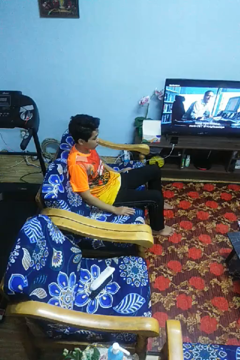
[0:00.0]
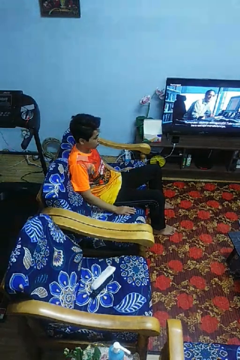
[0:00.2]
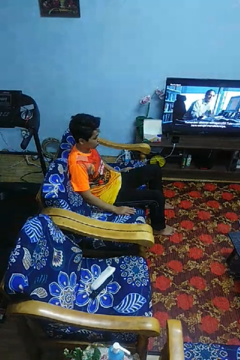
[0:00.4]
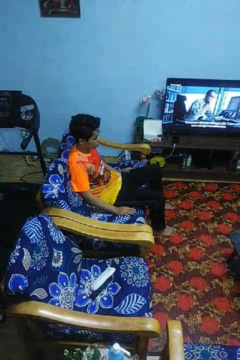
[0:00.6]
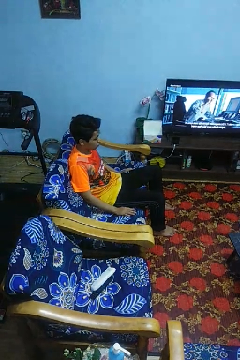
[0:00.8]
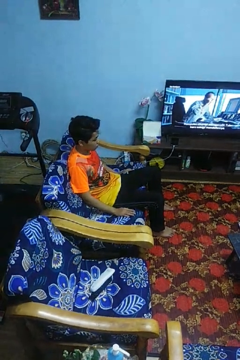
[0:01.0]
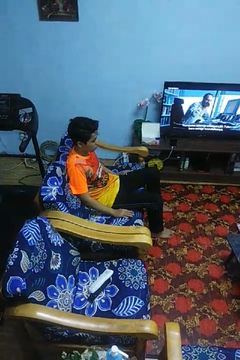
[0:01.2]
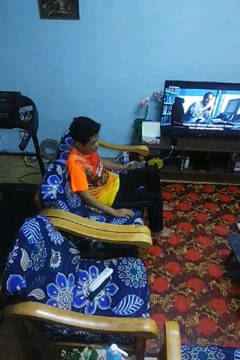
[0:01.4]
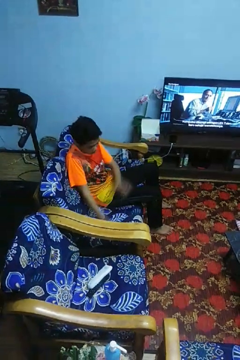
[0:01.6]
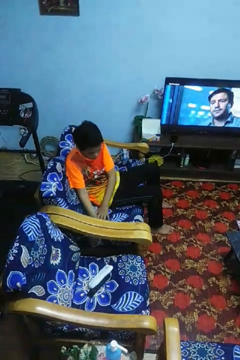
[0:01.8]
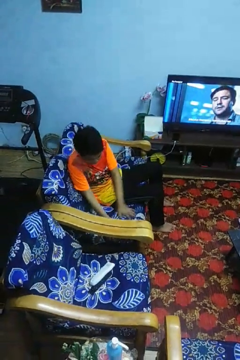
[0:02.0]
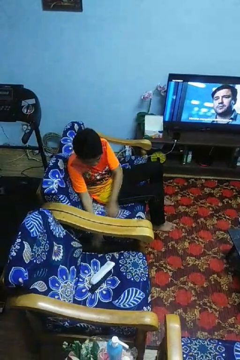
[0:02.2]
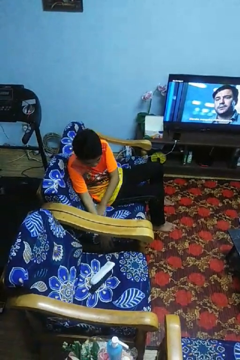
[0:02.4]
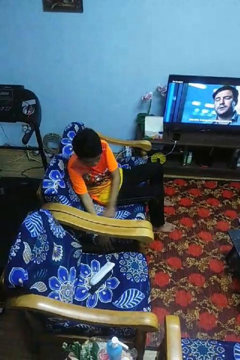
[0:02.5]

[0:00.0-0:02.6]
person searches in couch

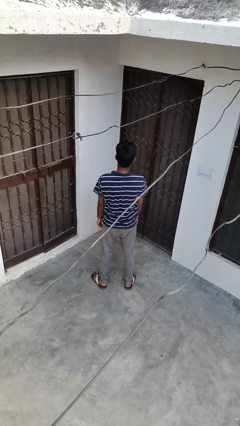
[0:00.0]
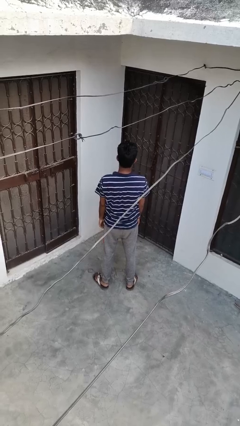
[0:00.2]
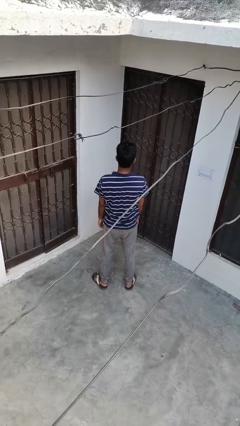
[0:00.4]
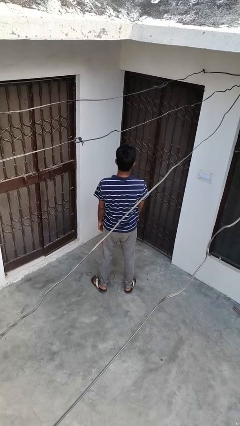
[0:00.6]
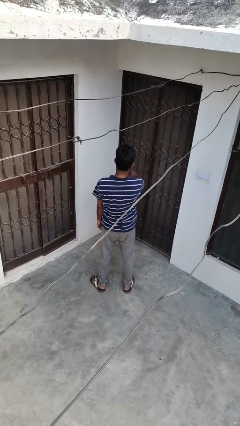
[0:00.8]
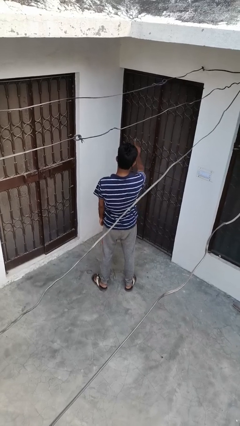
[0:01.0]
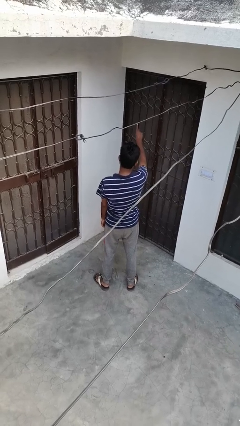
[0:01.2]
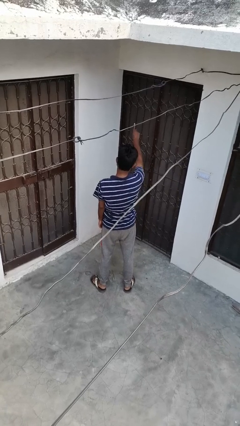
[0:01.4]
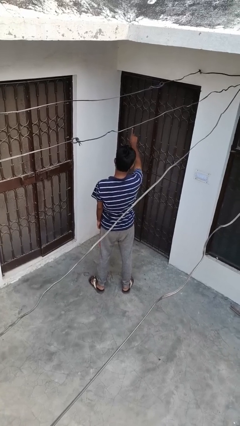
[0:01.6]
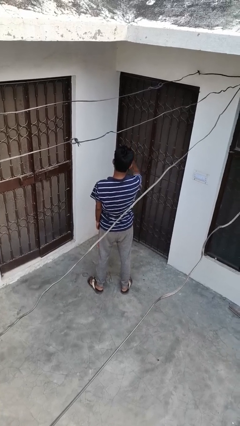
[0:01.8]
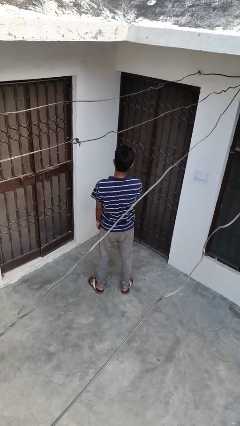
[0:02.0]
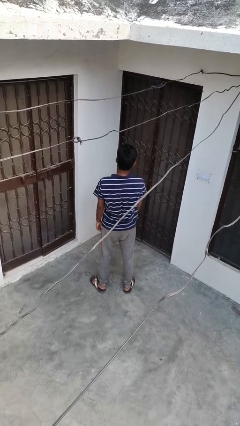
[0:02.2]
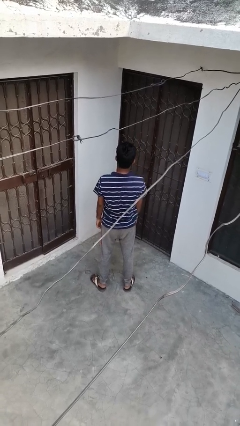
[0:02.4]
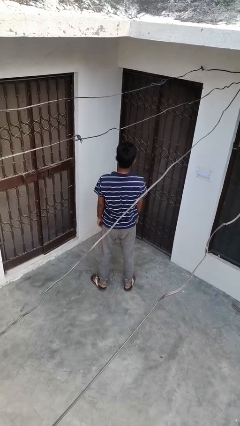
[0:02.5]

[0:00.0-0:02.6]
person gestures number one

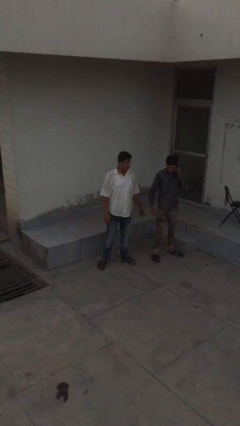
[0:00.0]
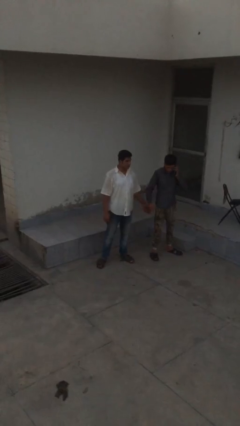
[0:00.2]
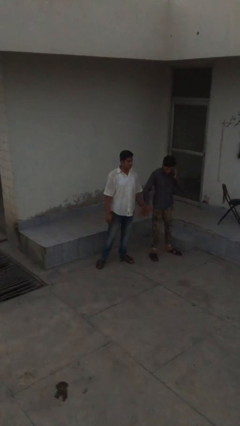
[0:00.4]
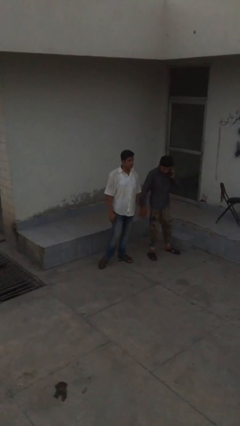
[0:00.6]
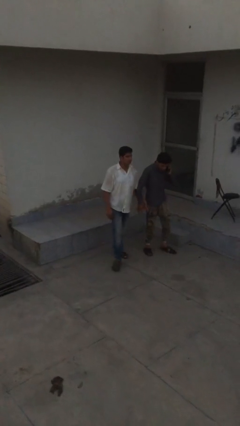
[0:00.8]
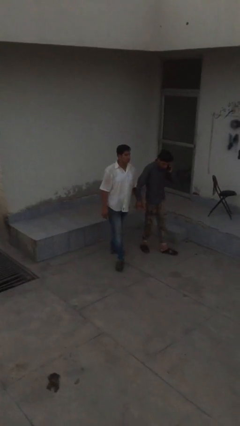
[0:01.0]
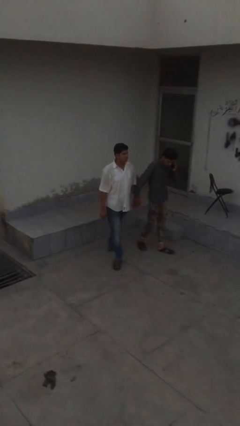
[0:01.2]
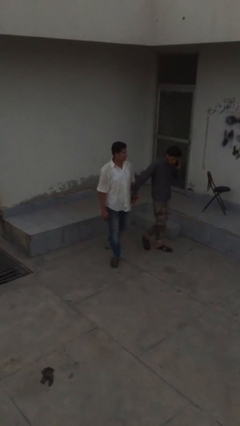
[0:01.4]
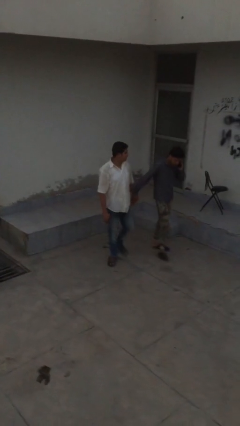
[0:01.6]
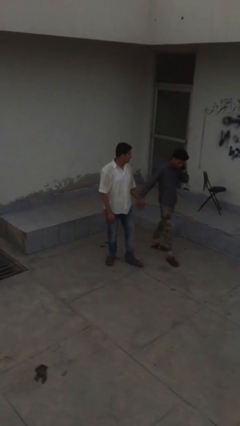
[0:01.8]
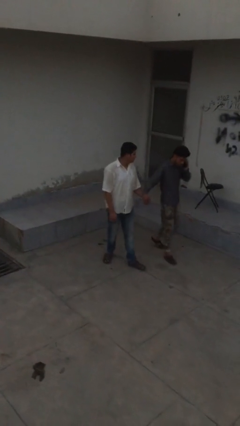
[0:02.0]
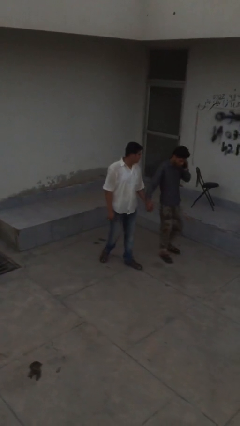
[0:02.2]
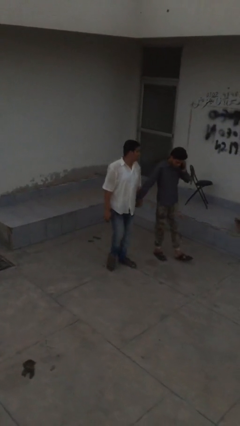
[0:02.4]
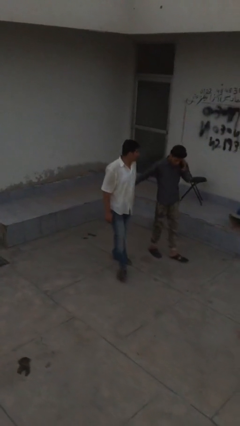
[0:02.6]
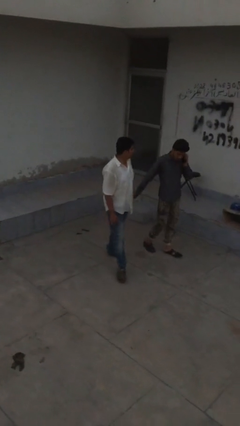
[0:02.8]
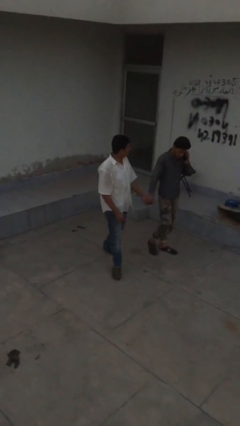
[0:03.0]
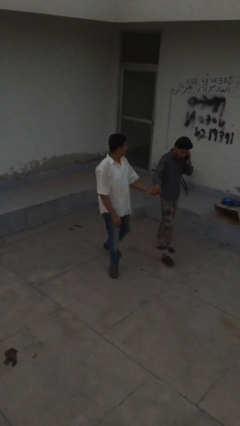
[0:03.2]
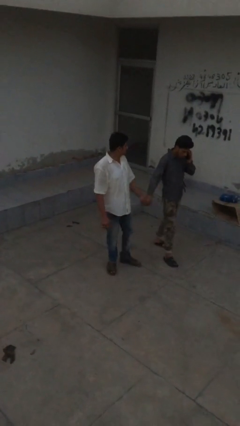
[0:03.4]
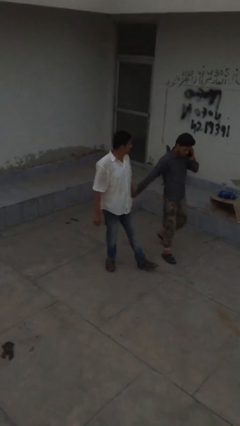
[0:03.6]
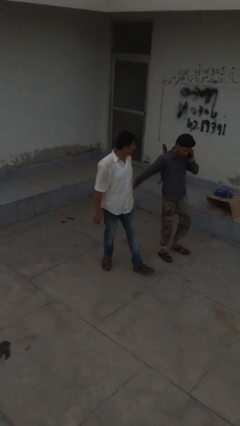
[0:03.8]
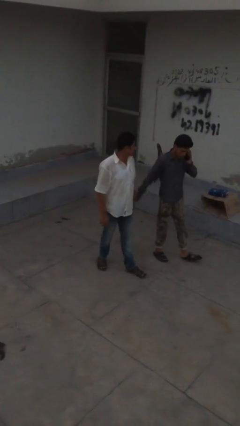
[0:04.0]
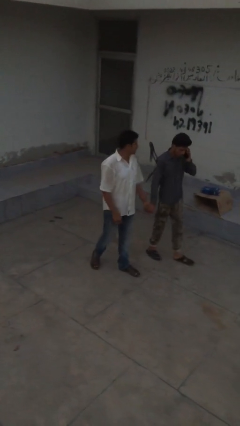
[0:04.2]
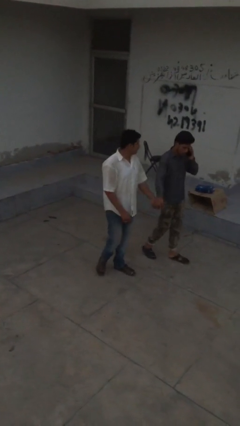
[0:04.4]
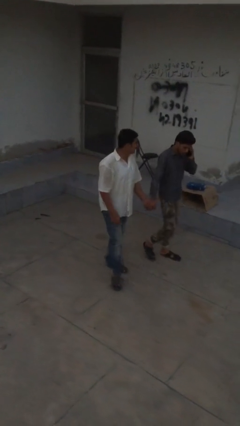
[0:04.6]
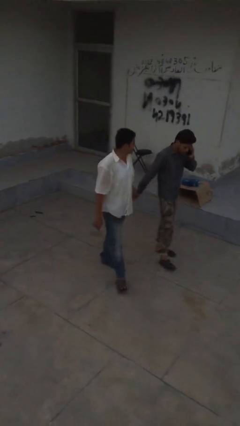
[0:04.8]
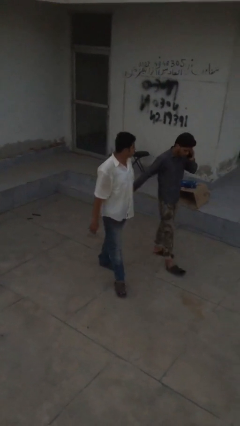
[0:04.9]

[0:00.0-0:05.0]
person holds hand

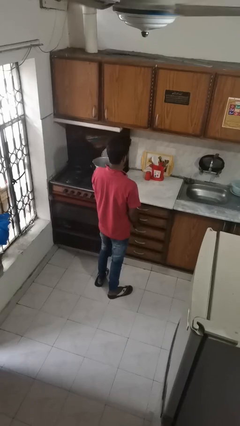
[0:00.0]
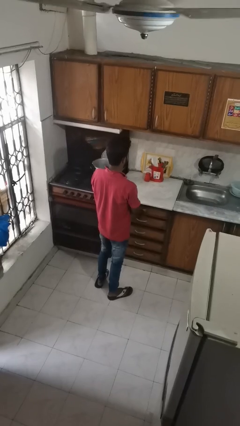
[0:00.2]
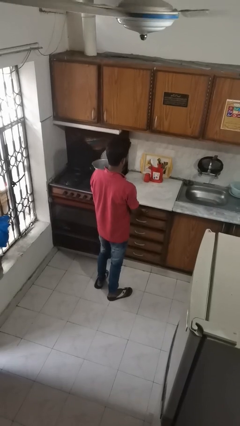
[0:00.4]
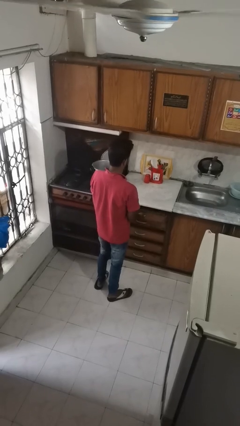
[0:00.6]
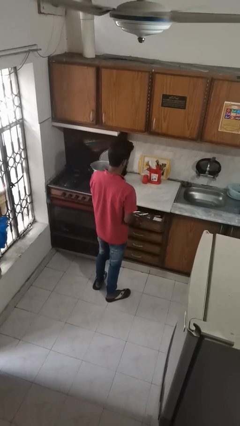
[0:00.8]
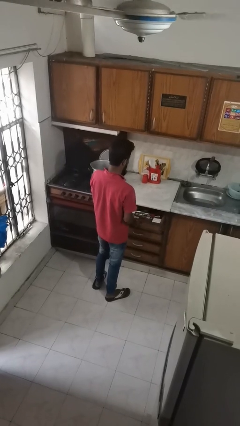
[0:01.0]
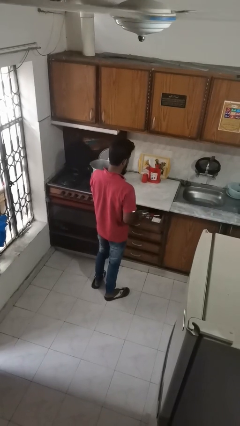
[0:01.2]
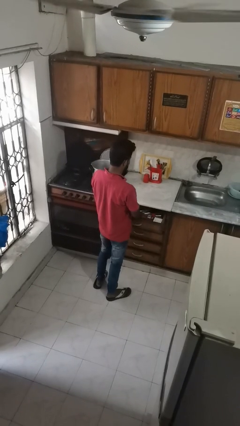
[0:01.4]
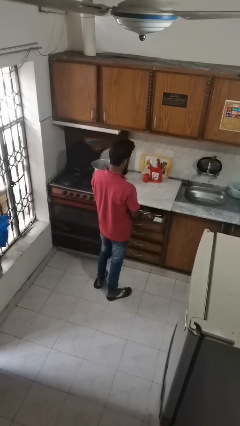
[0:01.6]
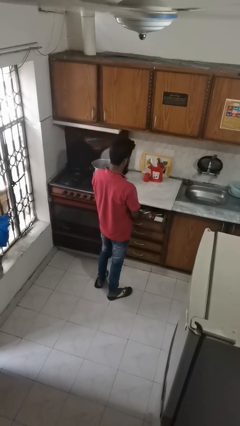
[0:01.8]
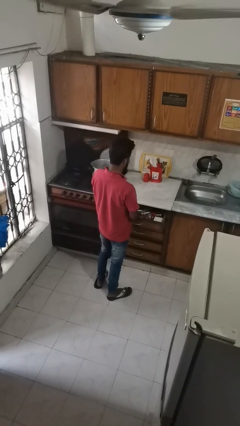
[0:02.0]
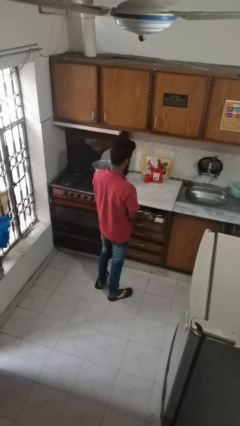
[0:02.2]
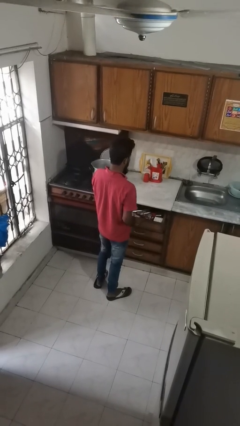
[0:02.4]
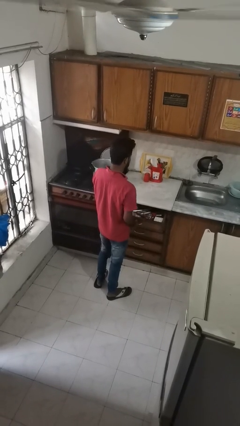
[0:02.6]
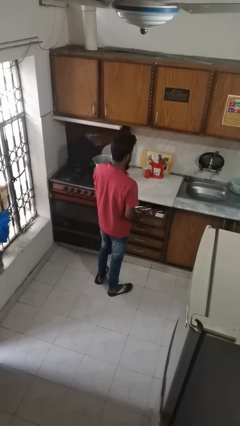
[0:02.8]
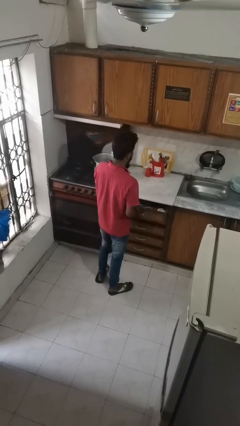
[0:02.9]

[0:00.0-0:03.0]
person searches in kitchen drawer

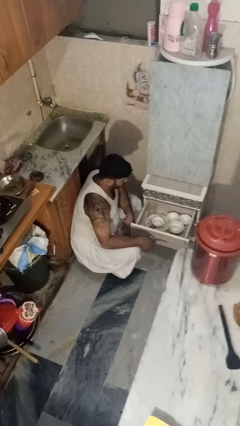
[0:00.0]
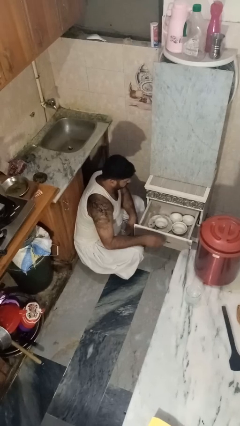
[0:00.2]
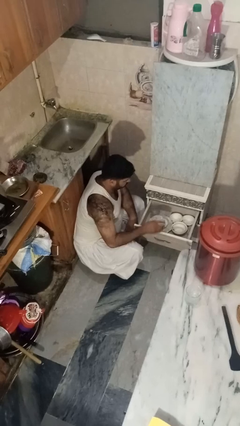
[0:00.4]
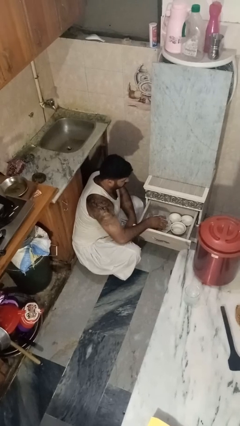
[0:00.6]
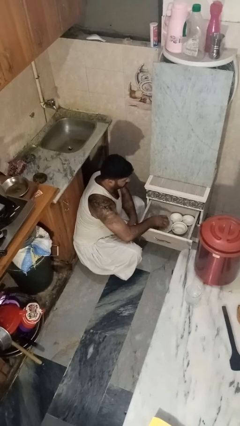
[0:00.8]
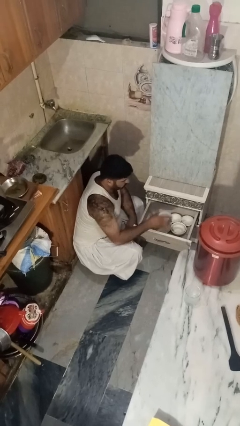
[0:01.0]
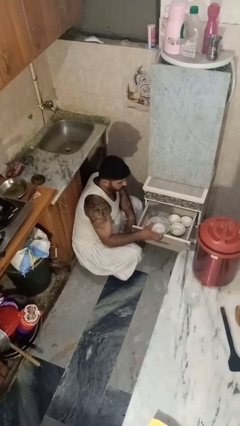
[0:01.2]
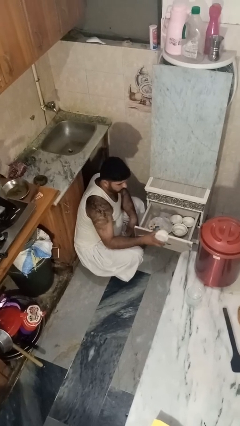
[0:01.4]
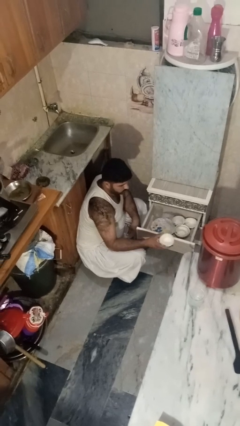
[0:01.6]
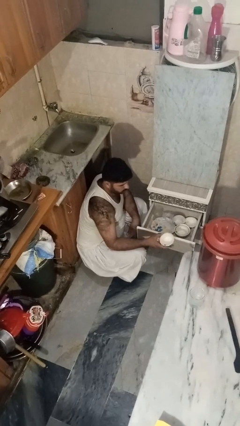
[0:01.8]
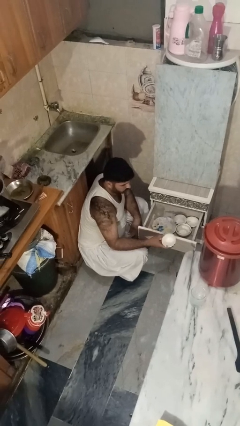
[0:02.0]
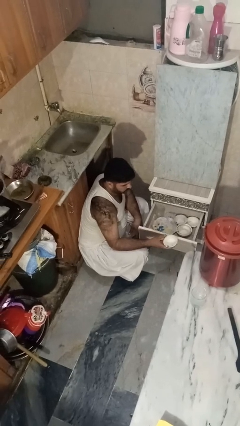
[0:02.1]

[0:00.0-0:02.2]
person takes object from kitchen drawer

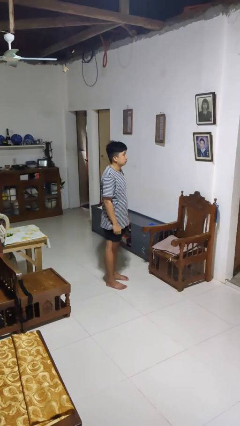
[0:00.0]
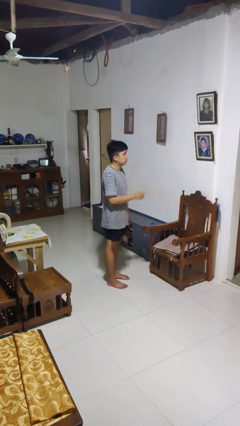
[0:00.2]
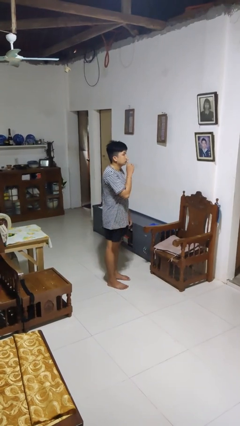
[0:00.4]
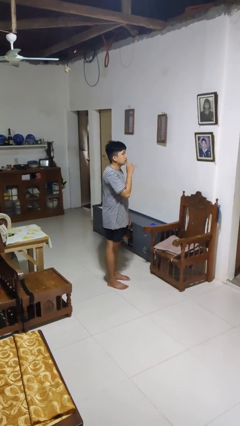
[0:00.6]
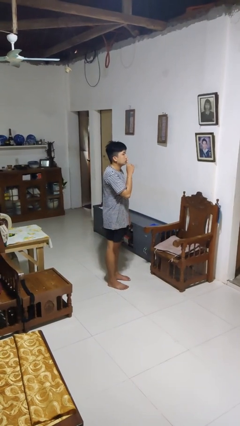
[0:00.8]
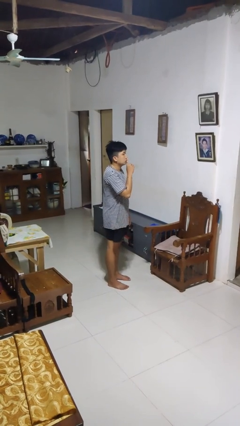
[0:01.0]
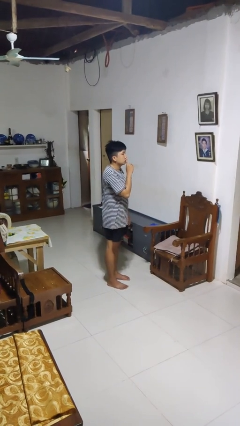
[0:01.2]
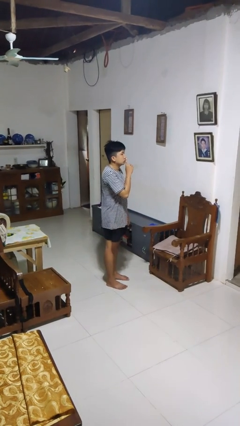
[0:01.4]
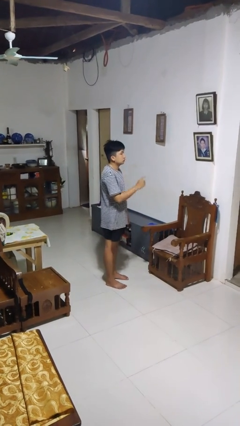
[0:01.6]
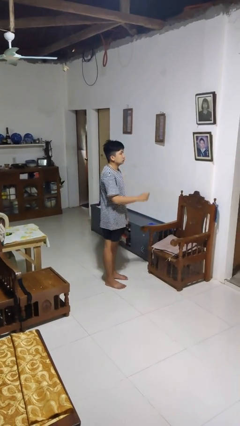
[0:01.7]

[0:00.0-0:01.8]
person gestures be quiet
